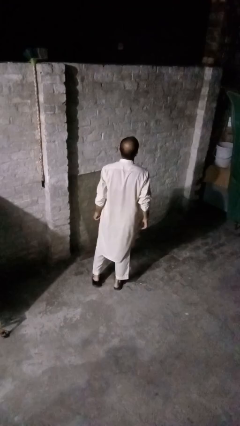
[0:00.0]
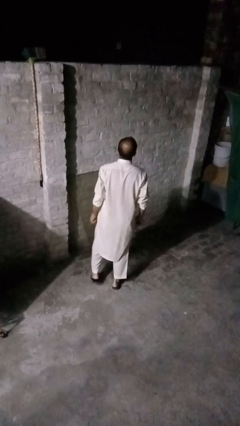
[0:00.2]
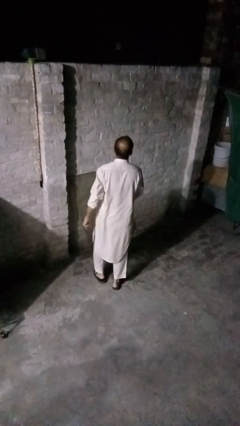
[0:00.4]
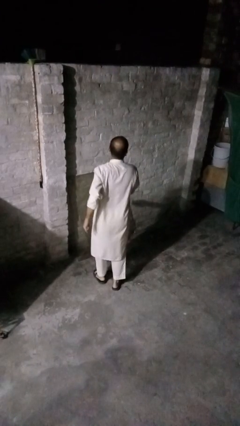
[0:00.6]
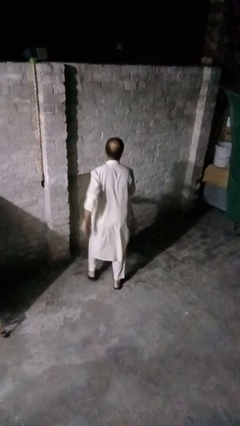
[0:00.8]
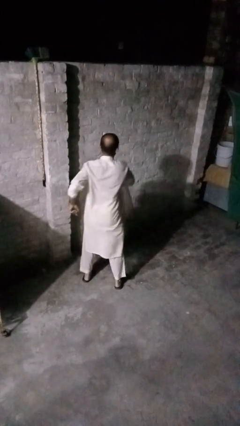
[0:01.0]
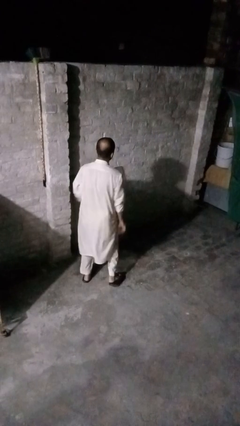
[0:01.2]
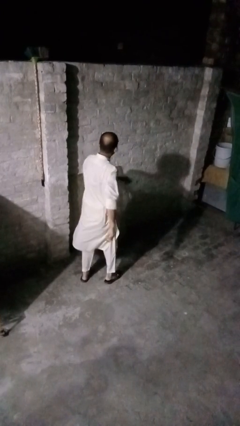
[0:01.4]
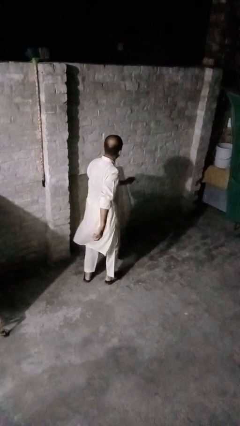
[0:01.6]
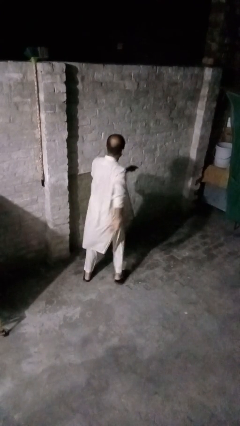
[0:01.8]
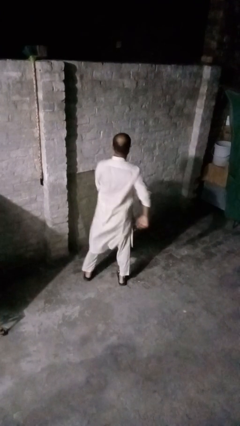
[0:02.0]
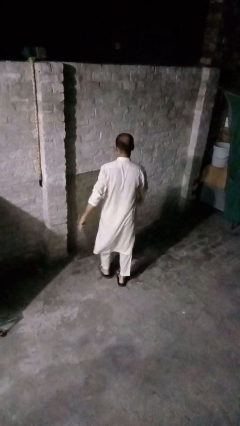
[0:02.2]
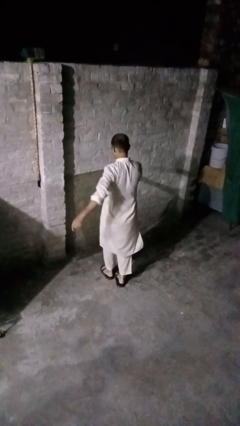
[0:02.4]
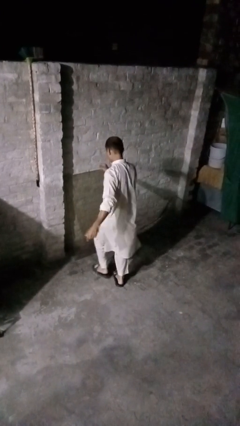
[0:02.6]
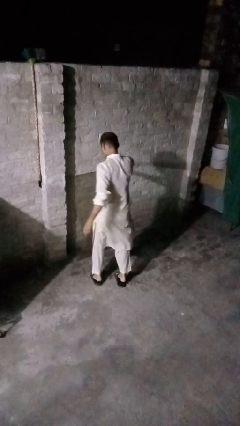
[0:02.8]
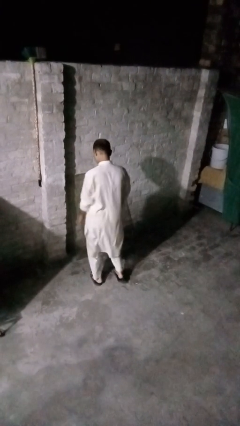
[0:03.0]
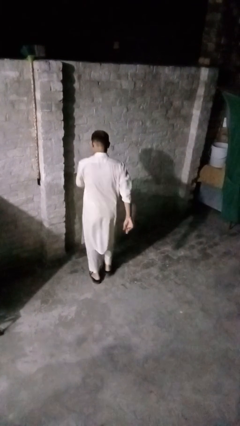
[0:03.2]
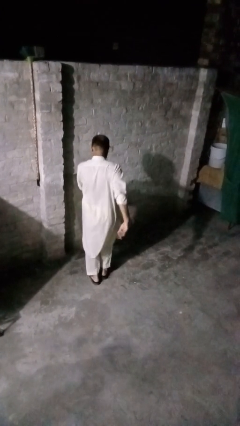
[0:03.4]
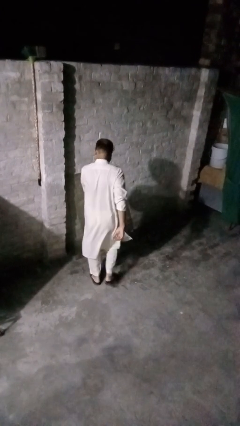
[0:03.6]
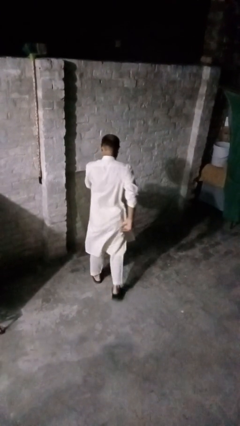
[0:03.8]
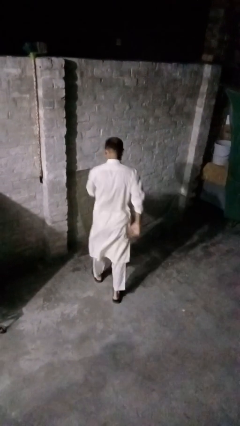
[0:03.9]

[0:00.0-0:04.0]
person dances in place

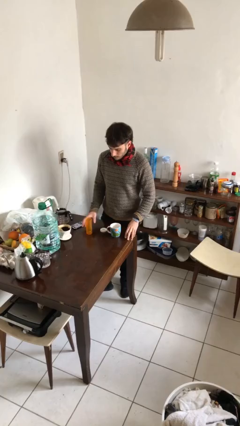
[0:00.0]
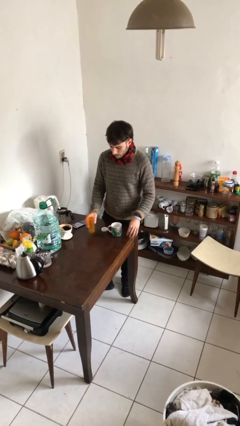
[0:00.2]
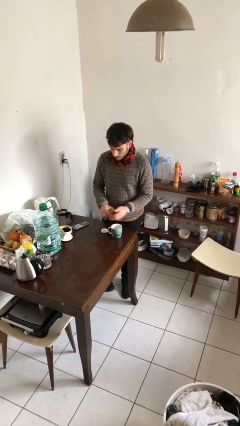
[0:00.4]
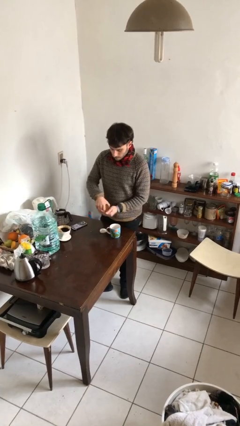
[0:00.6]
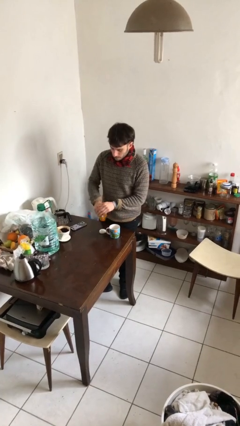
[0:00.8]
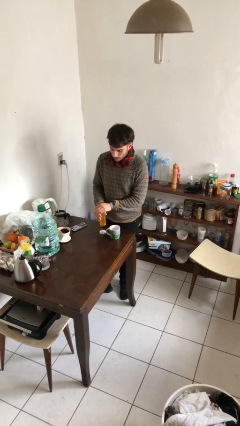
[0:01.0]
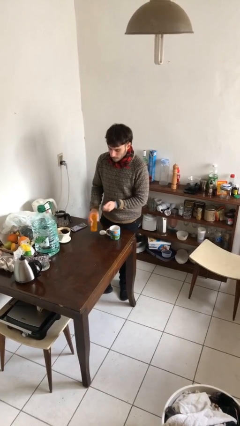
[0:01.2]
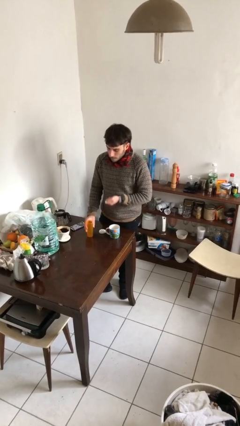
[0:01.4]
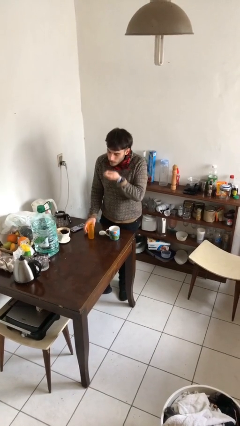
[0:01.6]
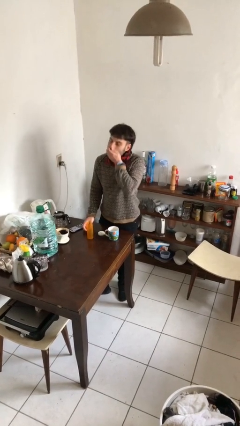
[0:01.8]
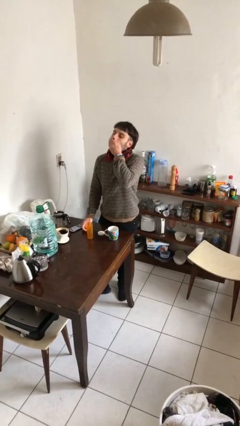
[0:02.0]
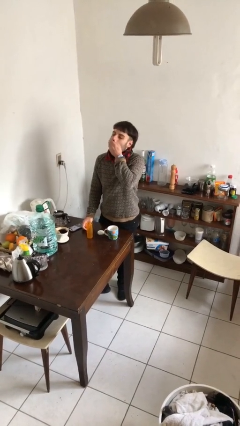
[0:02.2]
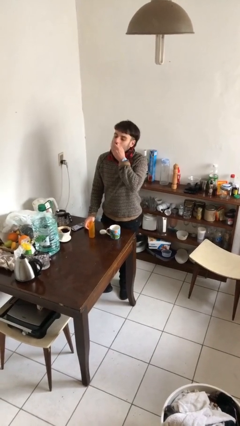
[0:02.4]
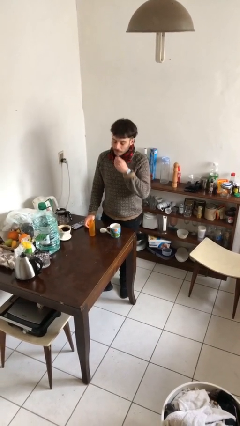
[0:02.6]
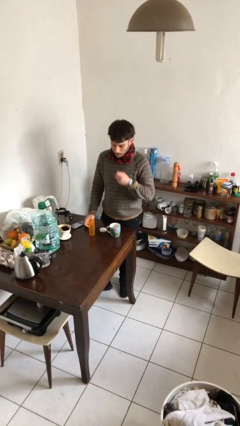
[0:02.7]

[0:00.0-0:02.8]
person takes medicine pills

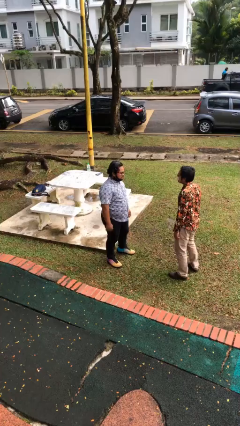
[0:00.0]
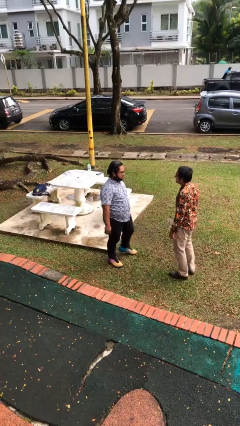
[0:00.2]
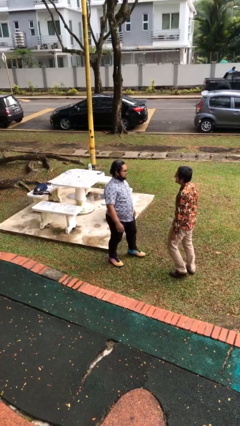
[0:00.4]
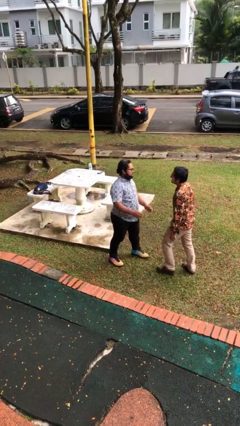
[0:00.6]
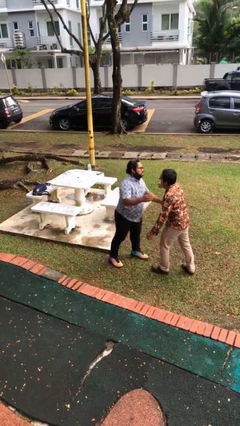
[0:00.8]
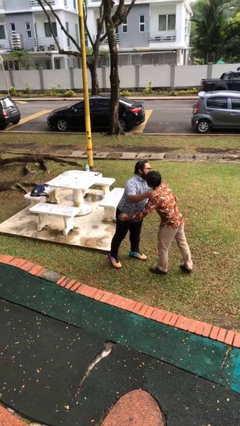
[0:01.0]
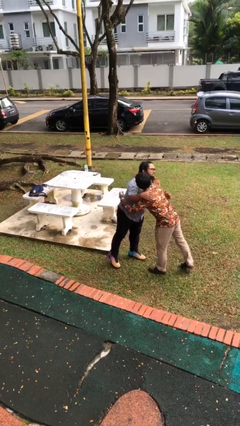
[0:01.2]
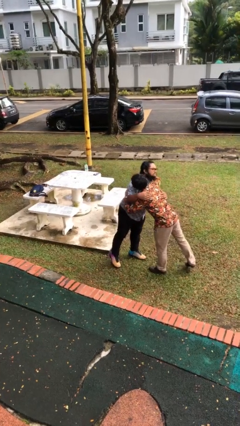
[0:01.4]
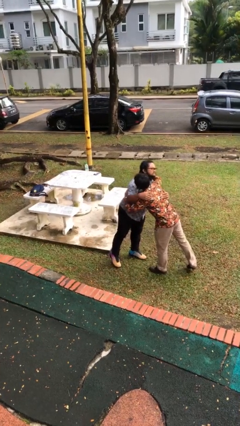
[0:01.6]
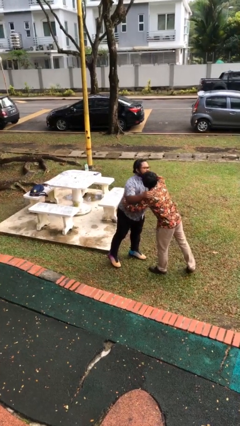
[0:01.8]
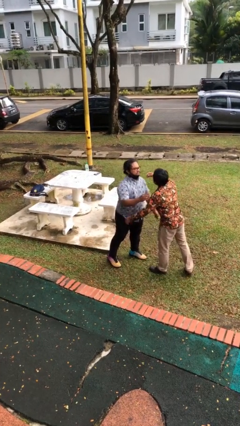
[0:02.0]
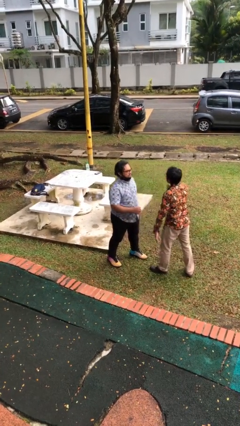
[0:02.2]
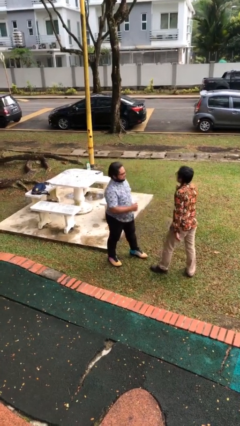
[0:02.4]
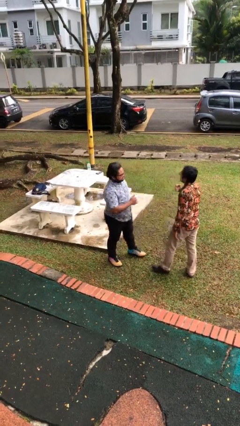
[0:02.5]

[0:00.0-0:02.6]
person embraces person

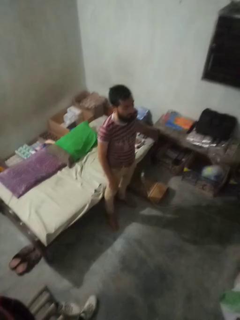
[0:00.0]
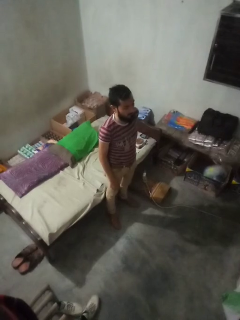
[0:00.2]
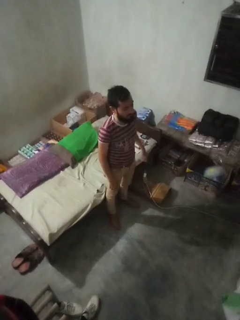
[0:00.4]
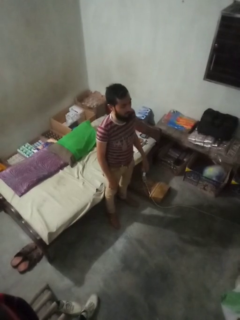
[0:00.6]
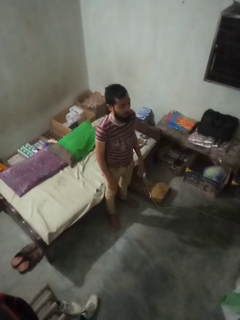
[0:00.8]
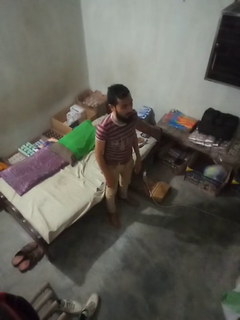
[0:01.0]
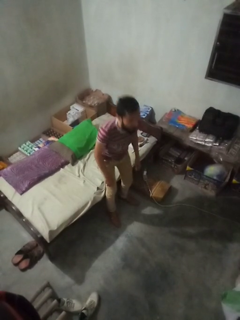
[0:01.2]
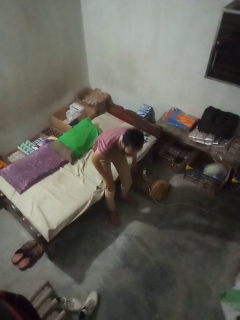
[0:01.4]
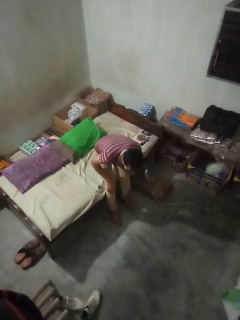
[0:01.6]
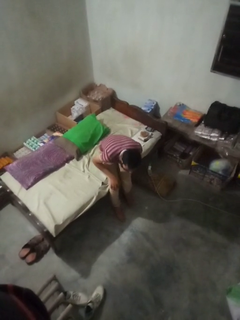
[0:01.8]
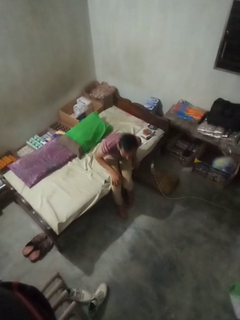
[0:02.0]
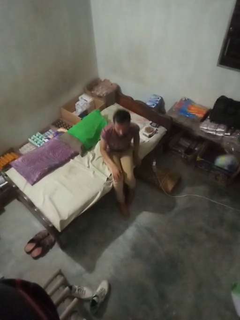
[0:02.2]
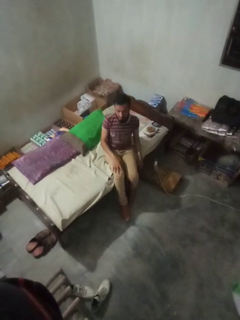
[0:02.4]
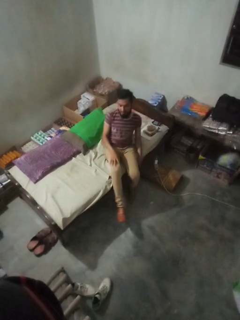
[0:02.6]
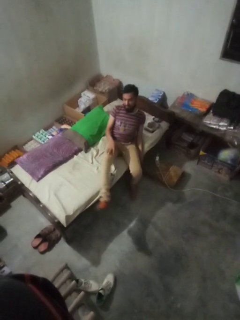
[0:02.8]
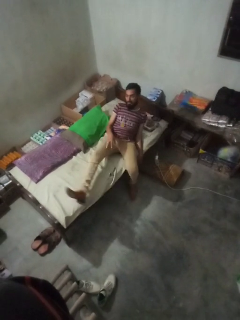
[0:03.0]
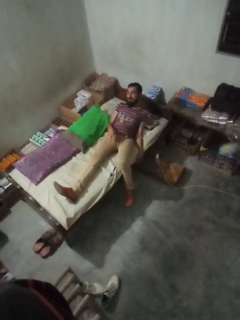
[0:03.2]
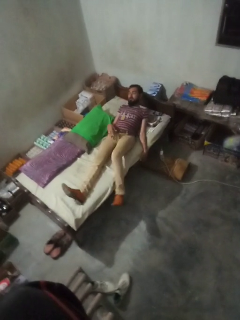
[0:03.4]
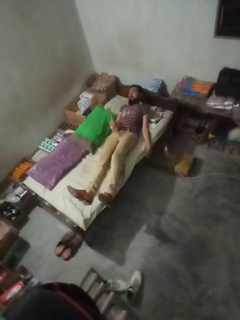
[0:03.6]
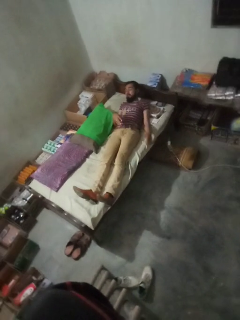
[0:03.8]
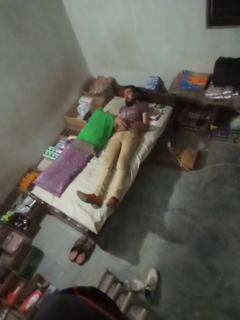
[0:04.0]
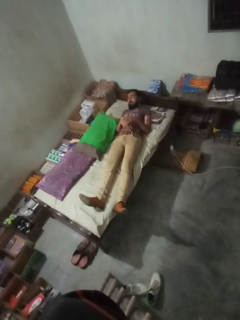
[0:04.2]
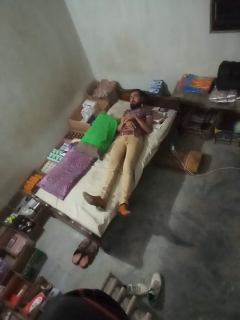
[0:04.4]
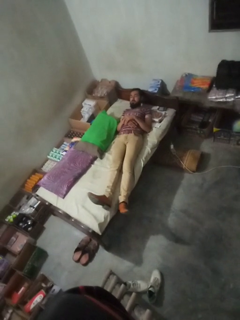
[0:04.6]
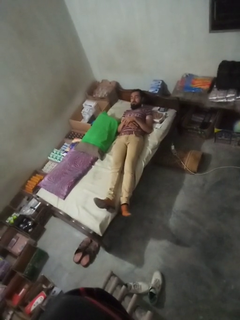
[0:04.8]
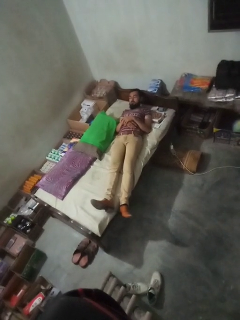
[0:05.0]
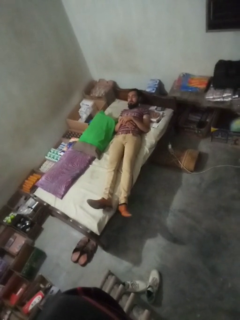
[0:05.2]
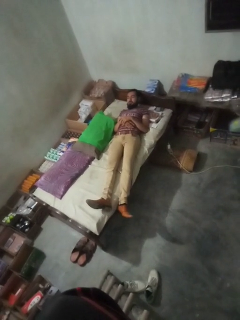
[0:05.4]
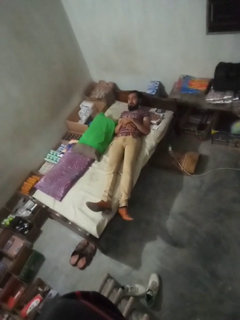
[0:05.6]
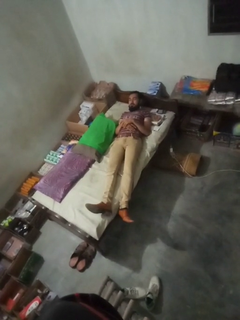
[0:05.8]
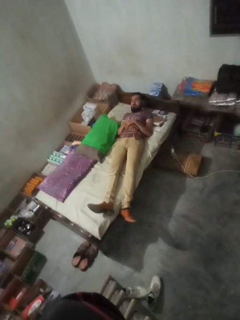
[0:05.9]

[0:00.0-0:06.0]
person lies down on couch

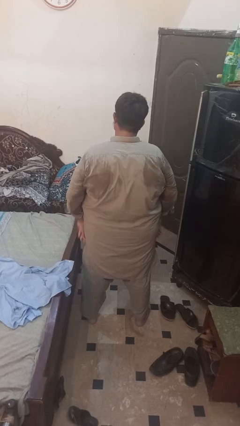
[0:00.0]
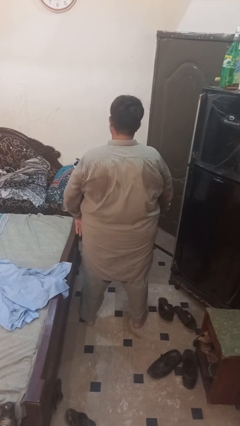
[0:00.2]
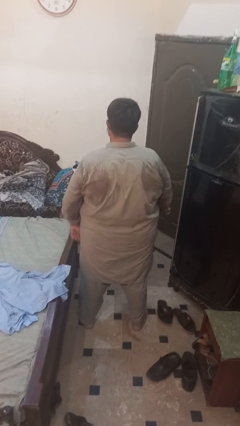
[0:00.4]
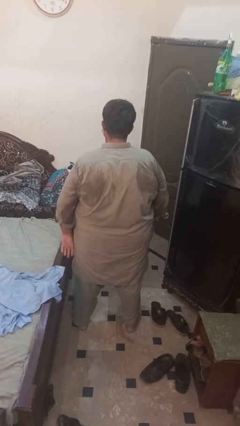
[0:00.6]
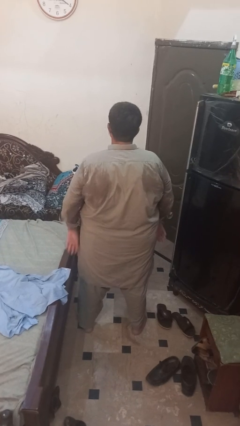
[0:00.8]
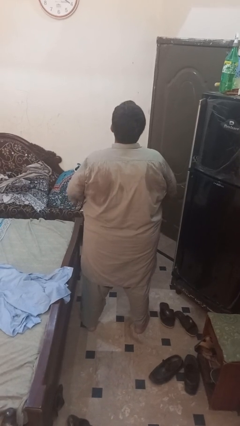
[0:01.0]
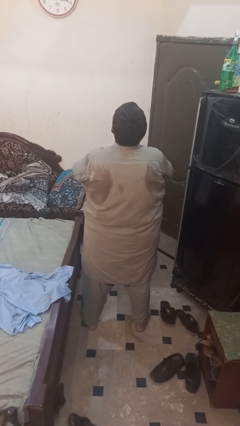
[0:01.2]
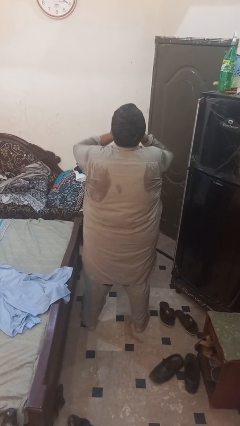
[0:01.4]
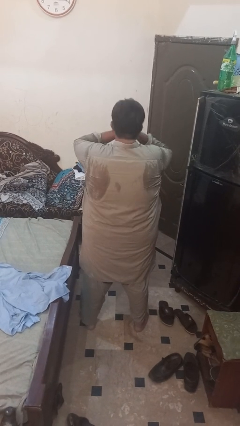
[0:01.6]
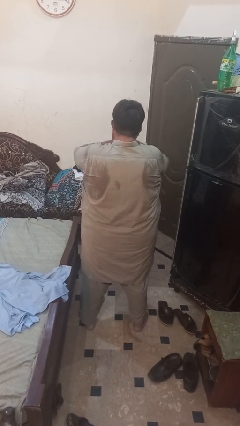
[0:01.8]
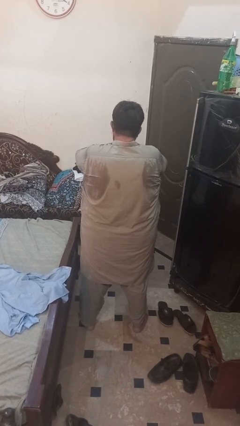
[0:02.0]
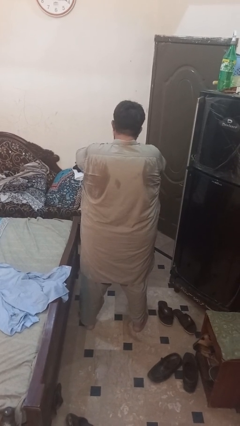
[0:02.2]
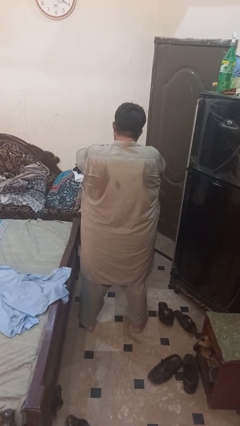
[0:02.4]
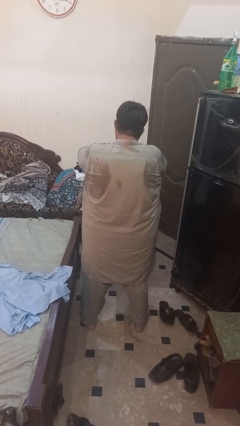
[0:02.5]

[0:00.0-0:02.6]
person sneezes into hand

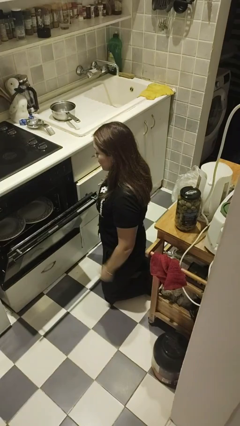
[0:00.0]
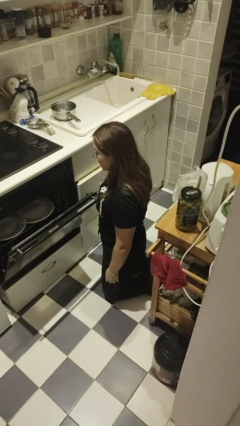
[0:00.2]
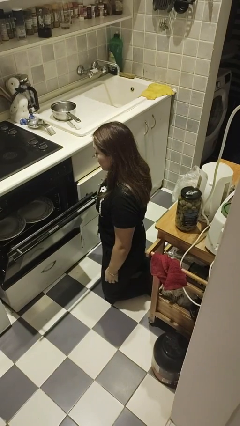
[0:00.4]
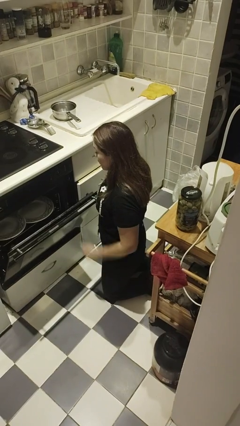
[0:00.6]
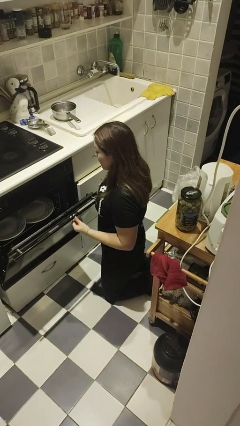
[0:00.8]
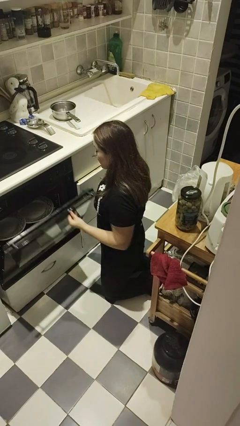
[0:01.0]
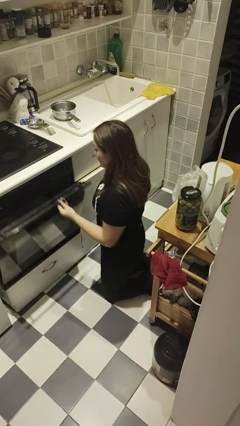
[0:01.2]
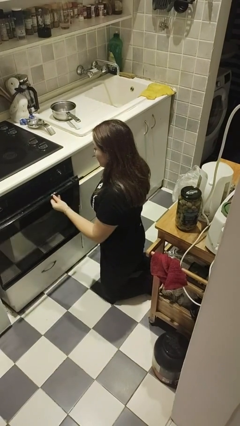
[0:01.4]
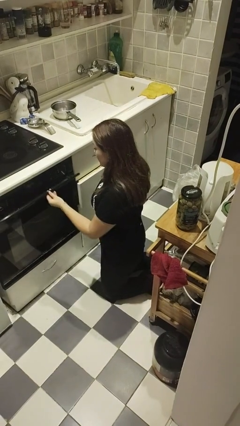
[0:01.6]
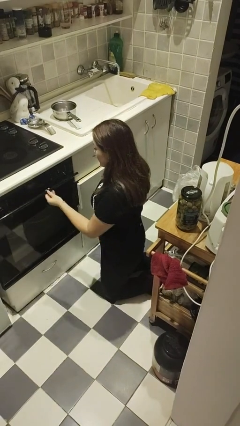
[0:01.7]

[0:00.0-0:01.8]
person closes oven door
